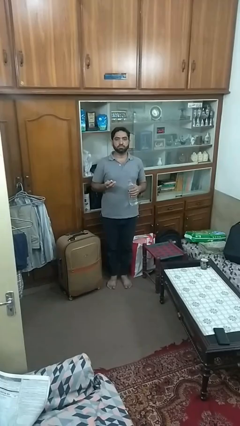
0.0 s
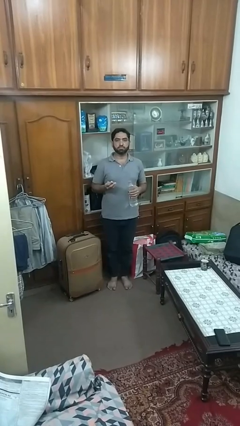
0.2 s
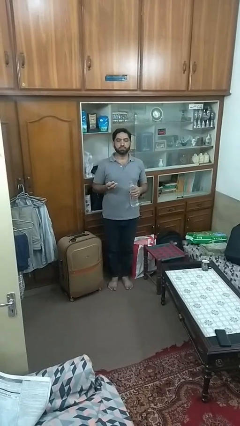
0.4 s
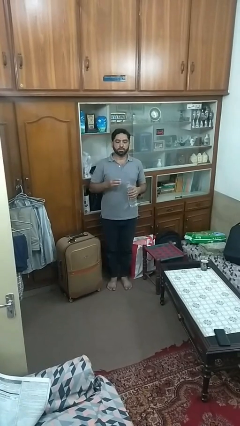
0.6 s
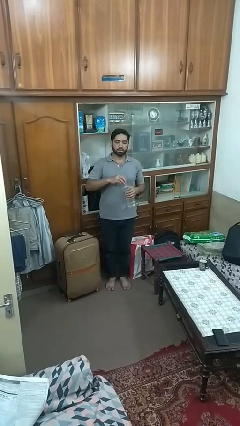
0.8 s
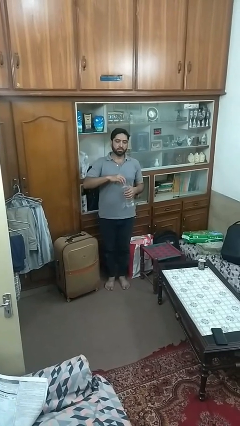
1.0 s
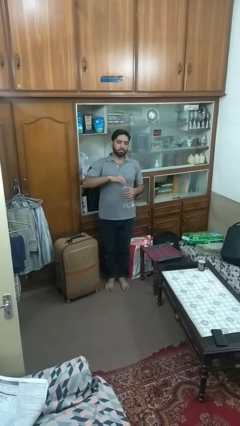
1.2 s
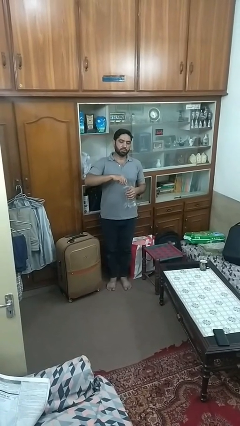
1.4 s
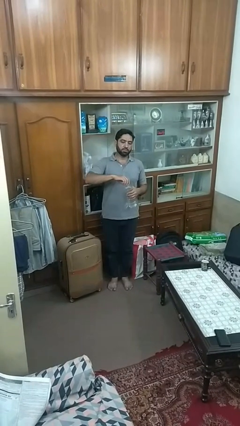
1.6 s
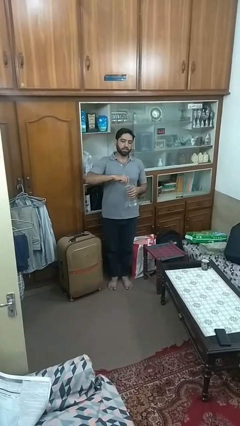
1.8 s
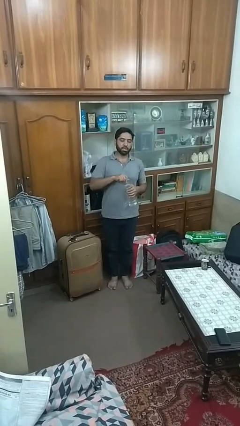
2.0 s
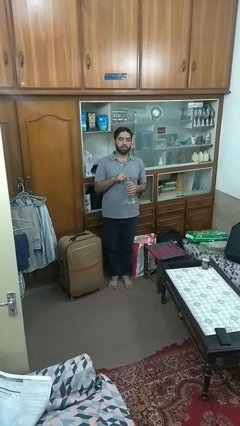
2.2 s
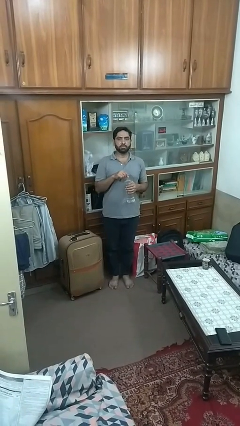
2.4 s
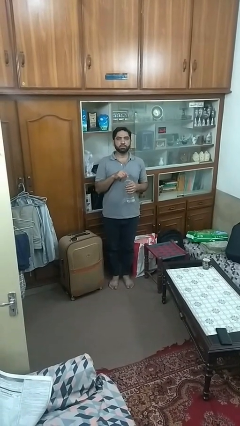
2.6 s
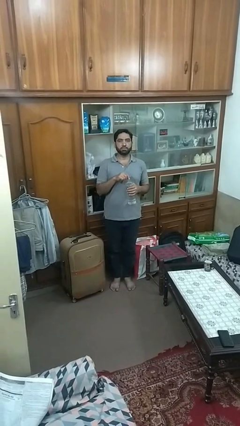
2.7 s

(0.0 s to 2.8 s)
person screws lid to bottle

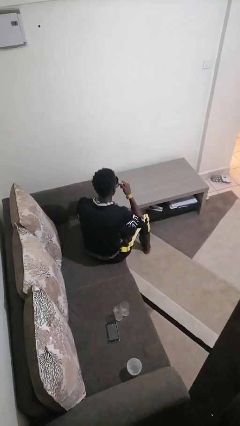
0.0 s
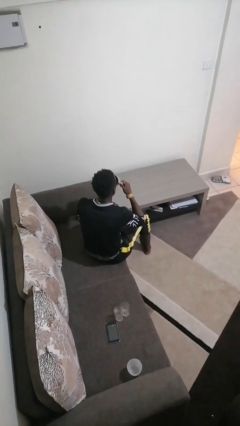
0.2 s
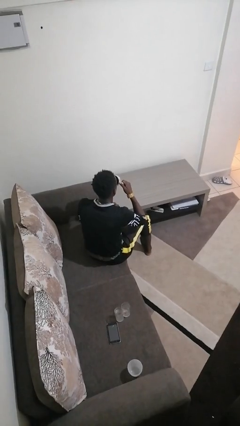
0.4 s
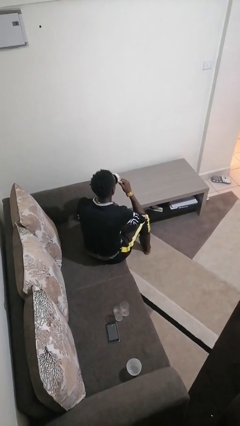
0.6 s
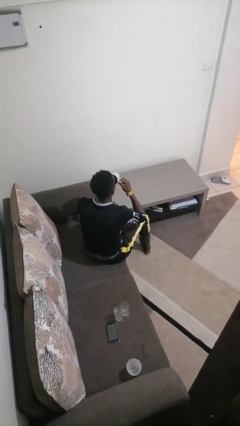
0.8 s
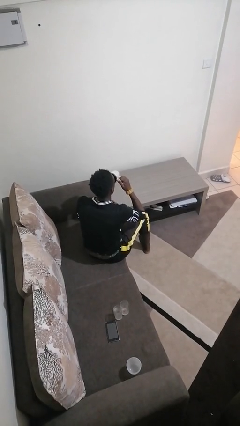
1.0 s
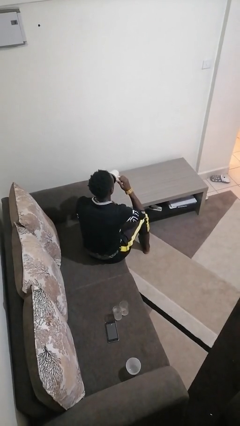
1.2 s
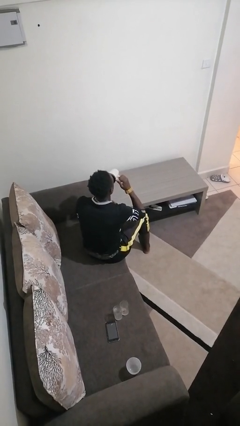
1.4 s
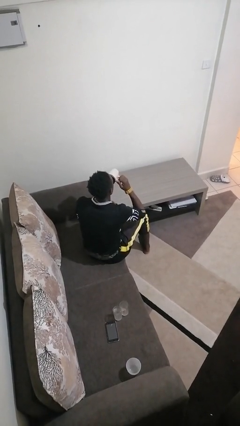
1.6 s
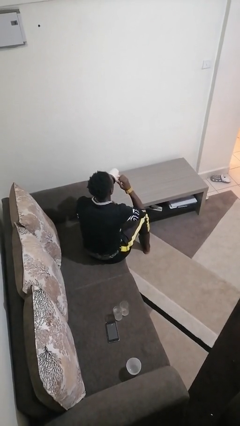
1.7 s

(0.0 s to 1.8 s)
person drinks from mug

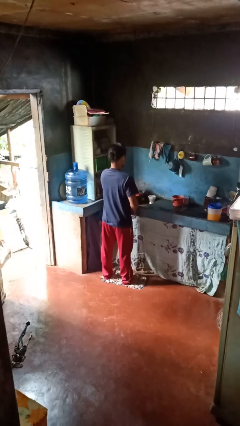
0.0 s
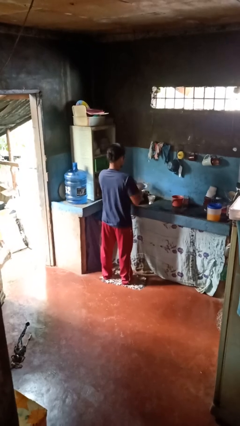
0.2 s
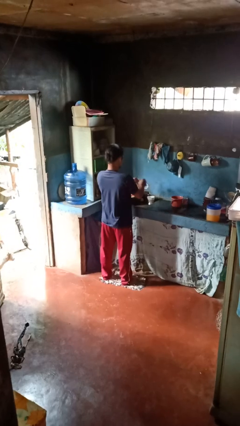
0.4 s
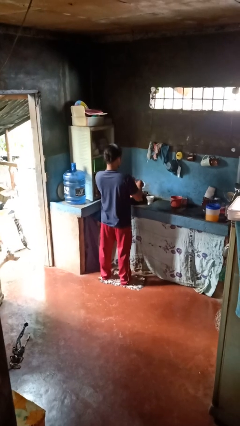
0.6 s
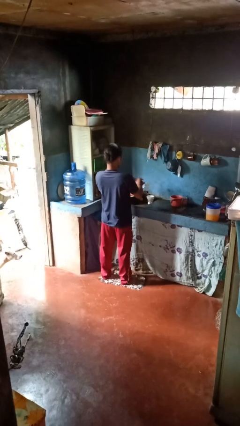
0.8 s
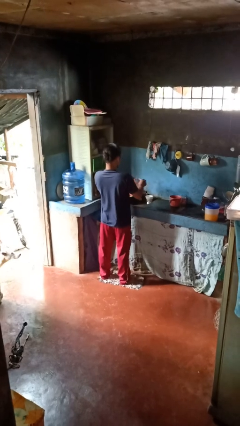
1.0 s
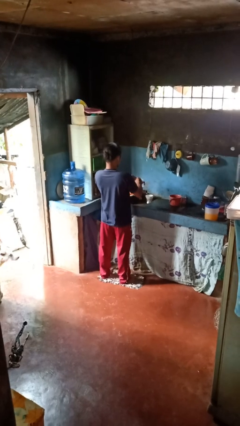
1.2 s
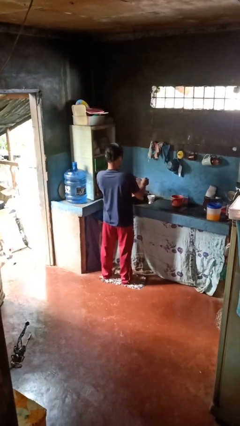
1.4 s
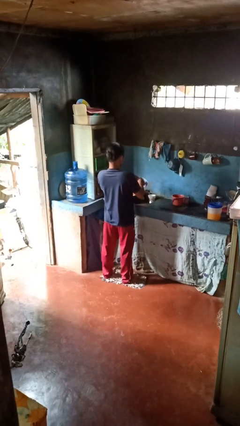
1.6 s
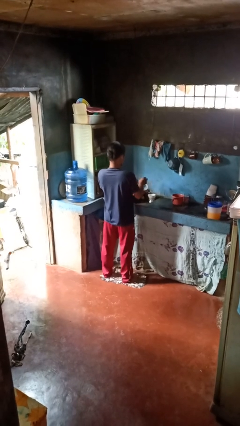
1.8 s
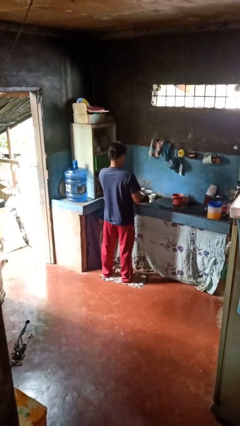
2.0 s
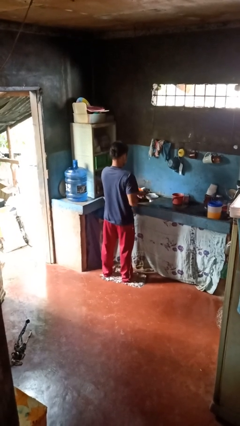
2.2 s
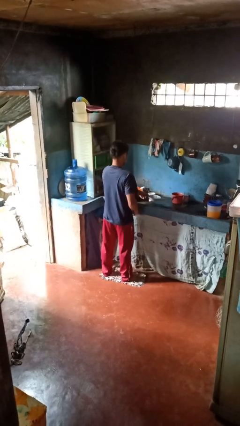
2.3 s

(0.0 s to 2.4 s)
person washes dish

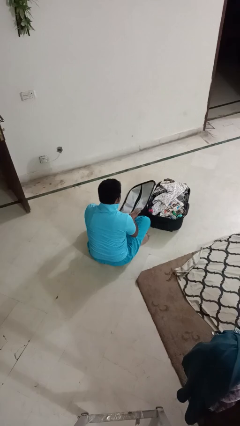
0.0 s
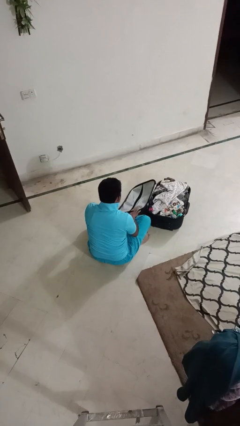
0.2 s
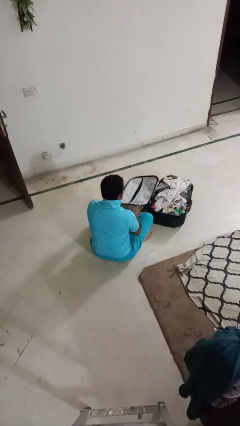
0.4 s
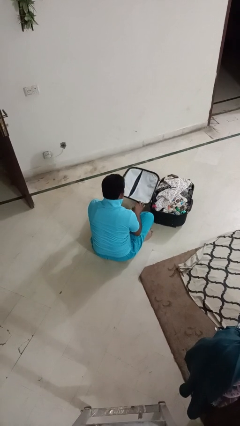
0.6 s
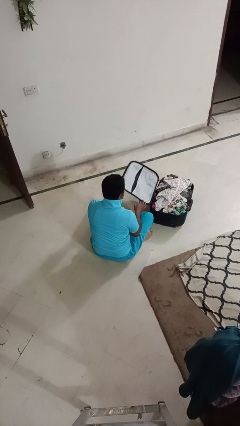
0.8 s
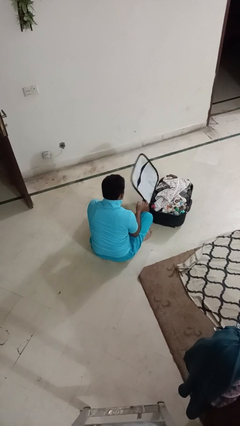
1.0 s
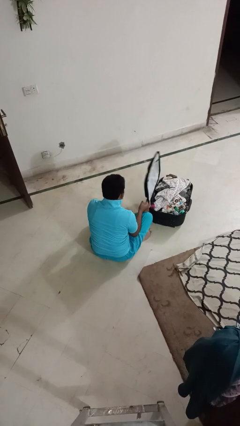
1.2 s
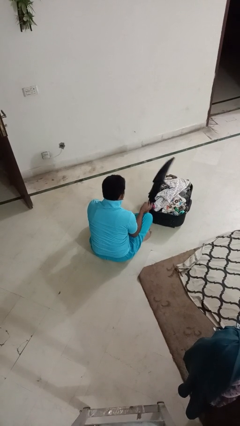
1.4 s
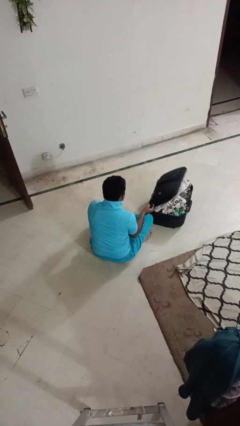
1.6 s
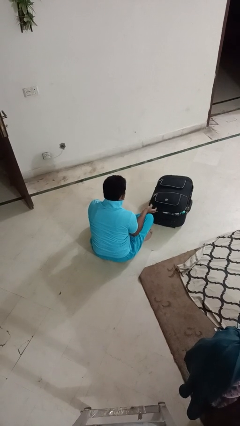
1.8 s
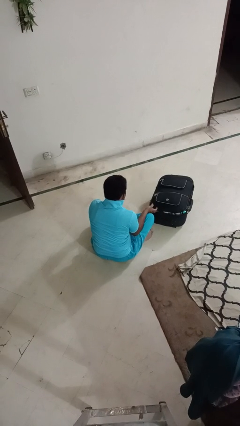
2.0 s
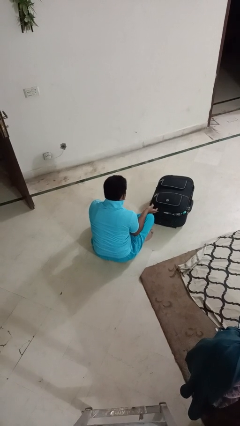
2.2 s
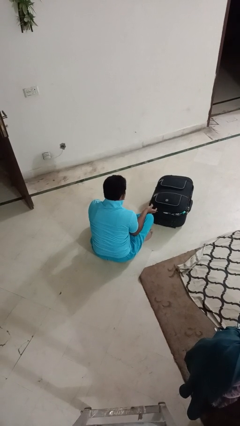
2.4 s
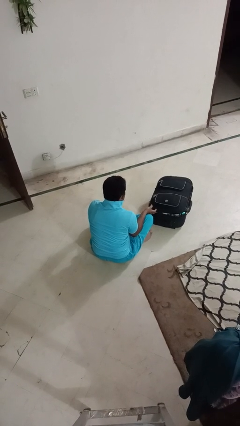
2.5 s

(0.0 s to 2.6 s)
person closes suitcase

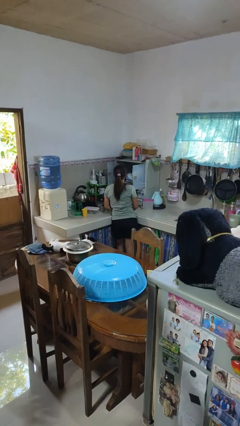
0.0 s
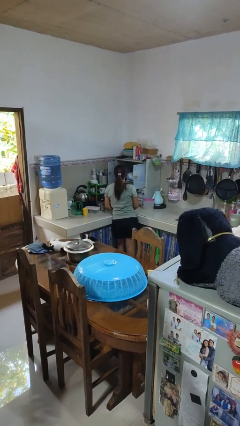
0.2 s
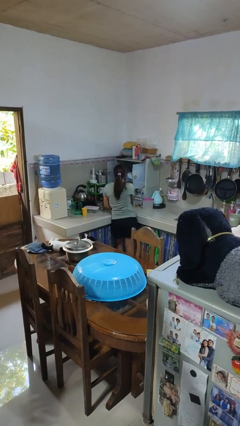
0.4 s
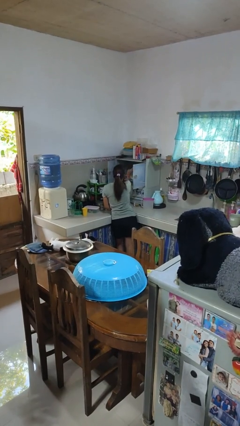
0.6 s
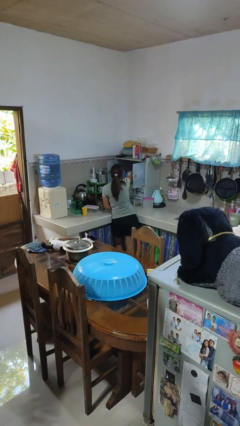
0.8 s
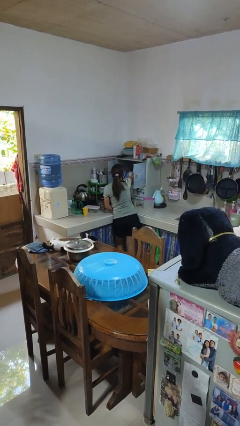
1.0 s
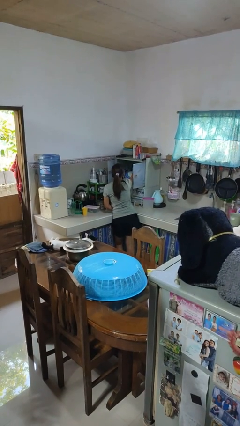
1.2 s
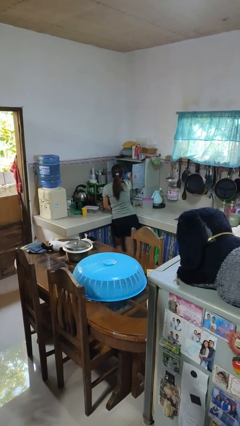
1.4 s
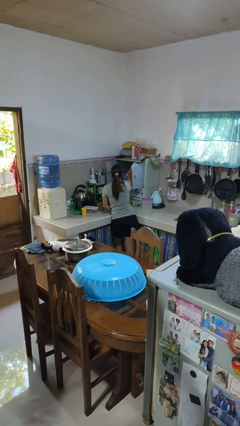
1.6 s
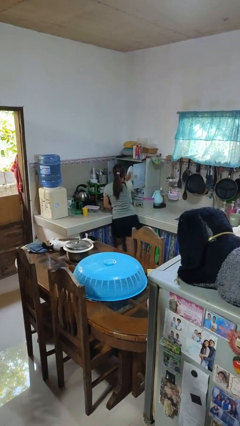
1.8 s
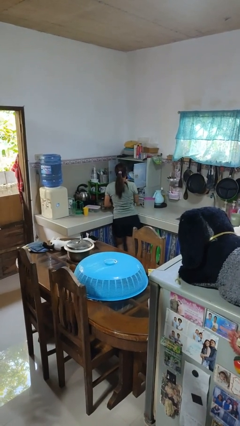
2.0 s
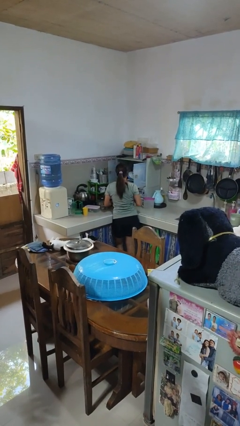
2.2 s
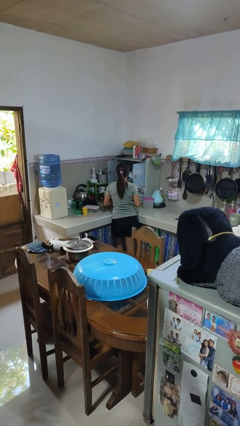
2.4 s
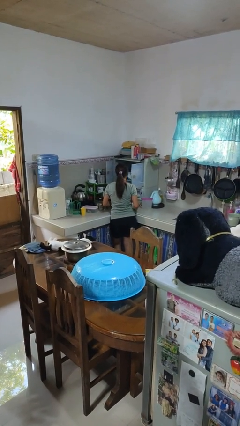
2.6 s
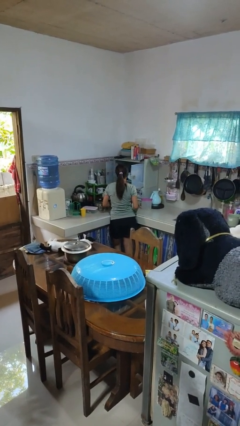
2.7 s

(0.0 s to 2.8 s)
person takes object from kitchen drawer

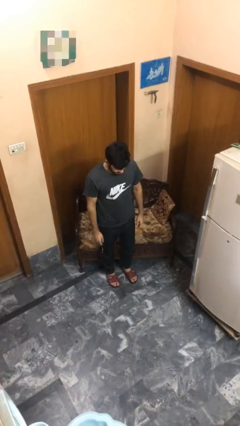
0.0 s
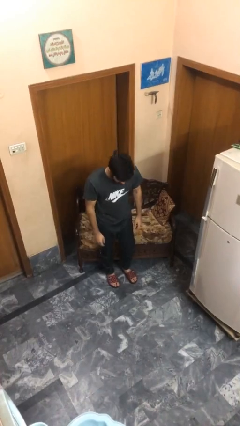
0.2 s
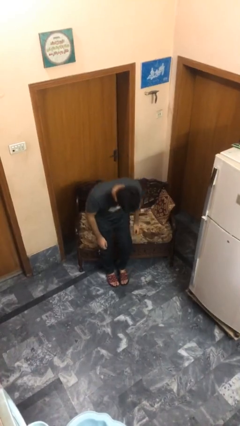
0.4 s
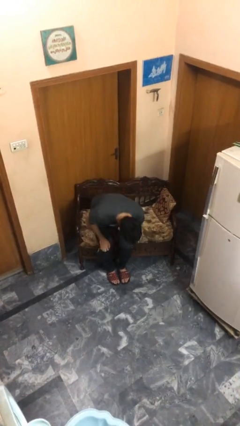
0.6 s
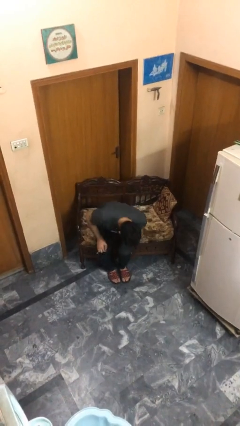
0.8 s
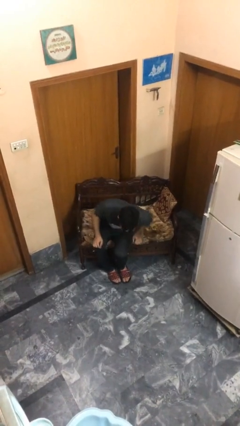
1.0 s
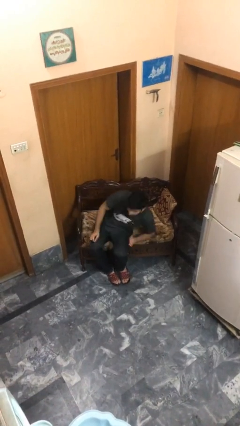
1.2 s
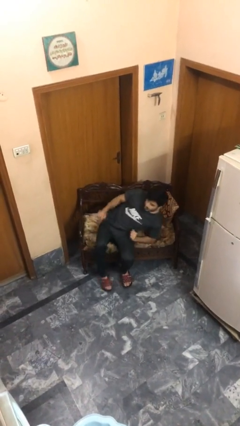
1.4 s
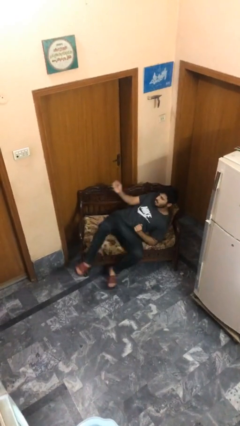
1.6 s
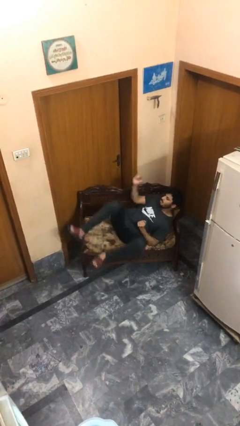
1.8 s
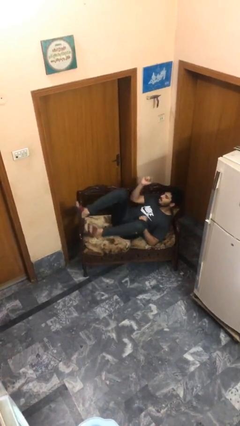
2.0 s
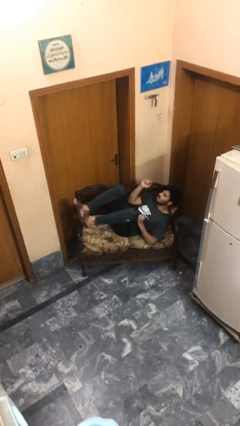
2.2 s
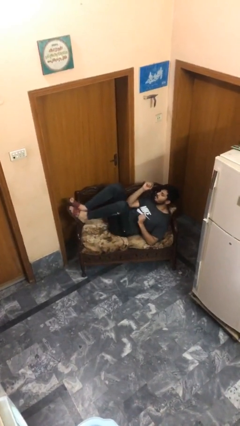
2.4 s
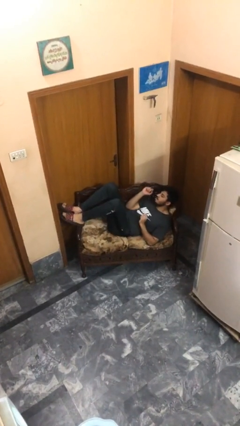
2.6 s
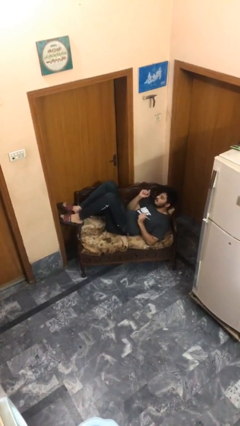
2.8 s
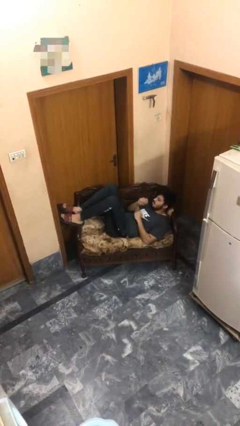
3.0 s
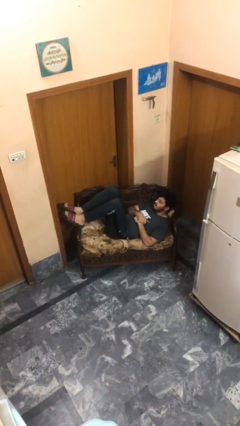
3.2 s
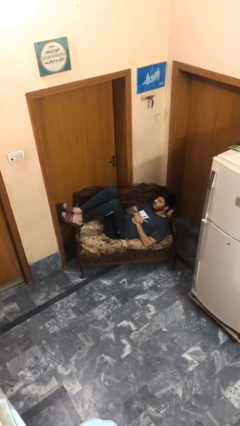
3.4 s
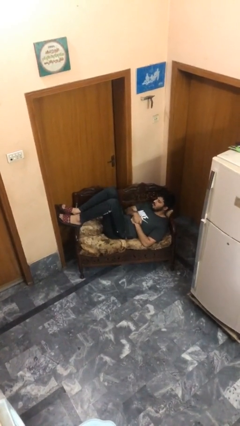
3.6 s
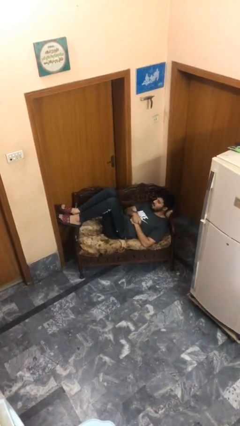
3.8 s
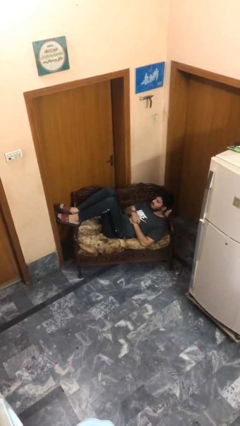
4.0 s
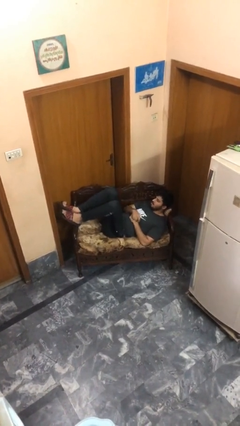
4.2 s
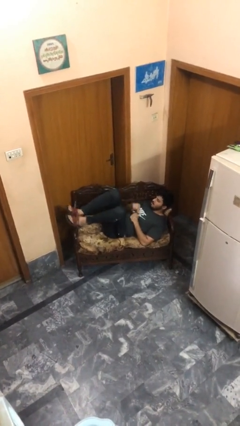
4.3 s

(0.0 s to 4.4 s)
person lies down on couch

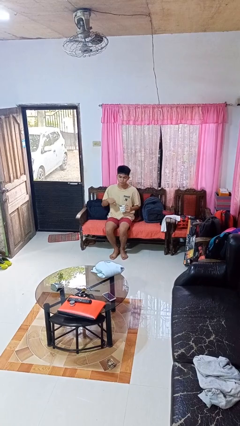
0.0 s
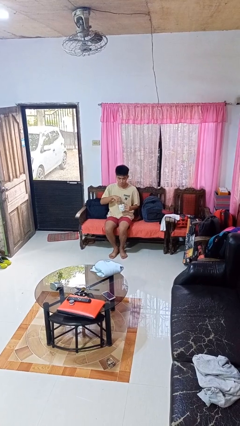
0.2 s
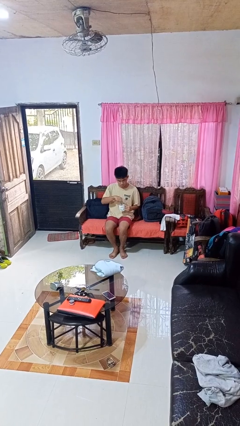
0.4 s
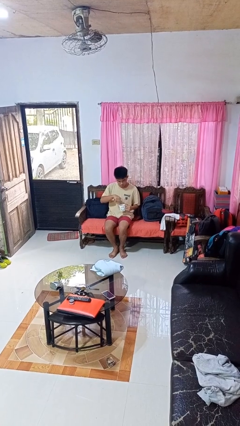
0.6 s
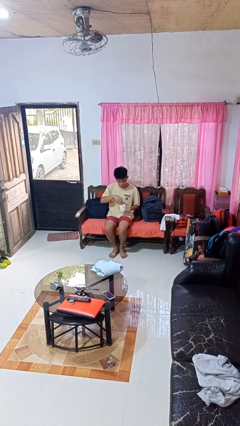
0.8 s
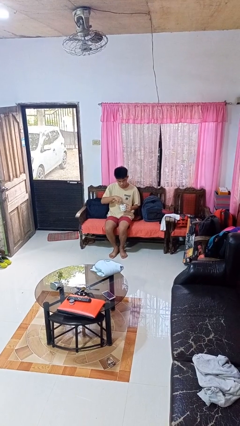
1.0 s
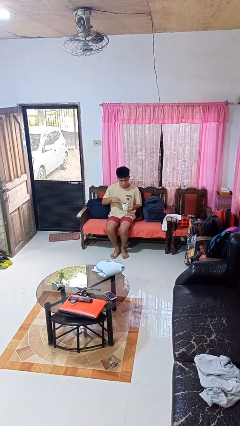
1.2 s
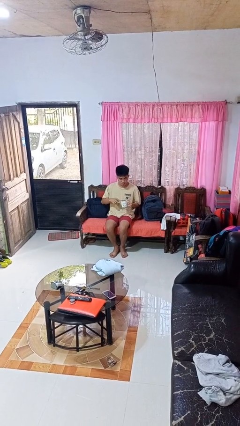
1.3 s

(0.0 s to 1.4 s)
person stirs mug
